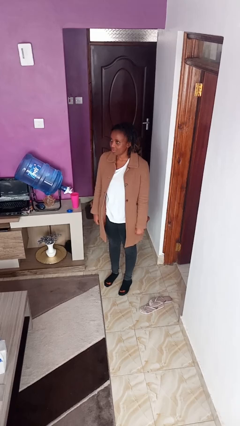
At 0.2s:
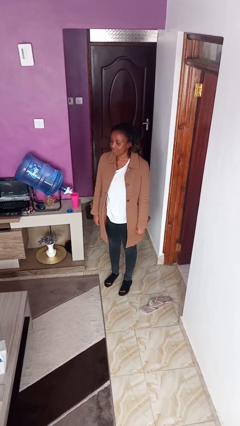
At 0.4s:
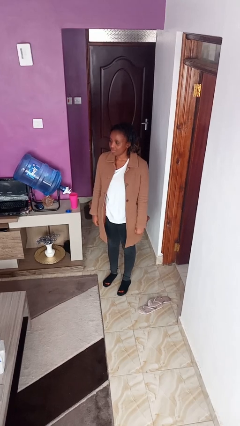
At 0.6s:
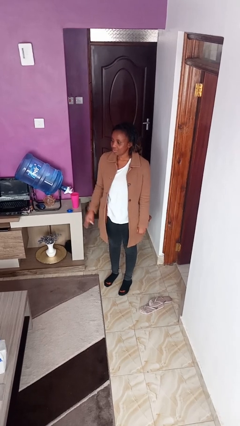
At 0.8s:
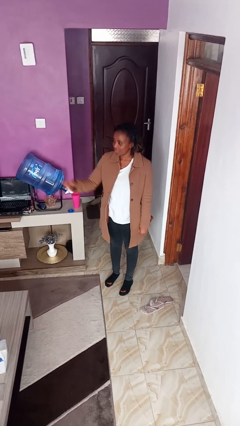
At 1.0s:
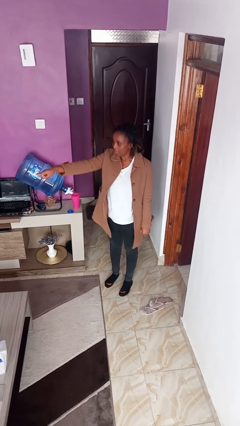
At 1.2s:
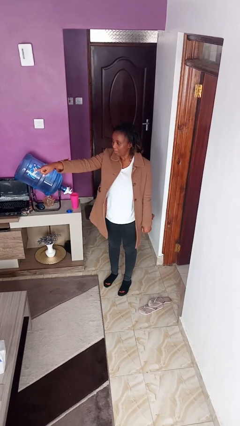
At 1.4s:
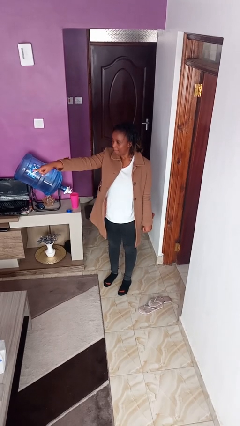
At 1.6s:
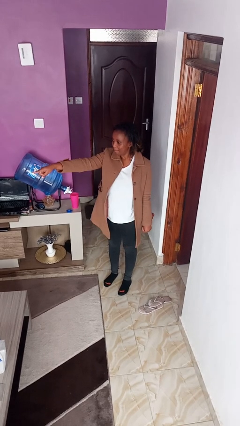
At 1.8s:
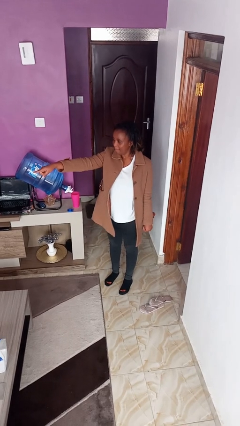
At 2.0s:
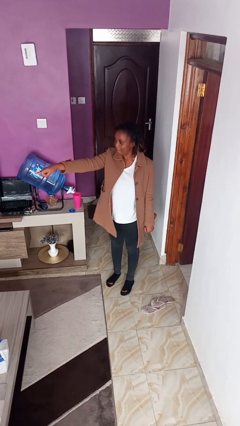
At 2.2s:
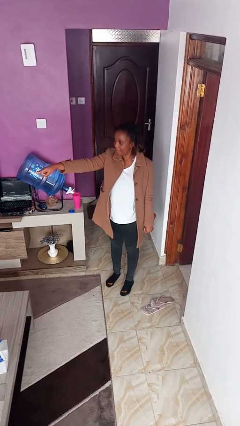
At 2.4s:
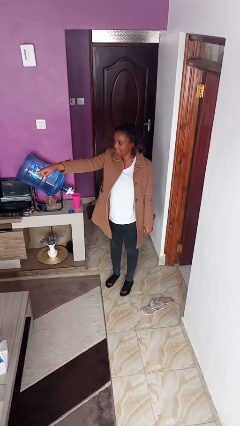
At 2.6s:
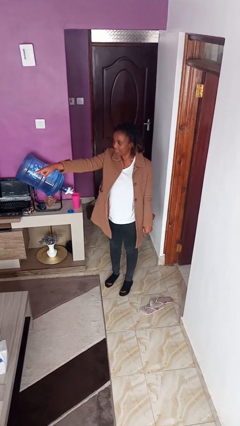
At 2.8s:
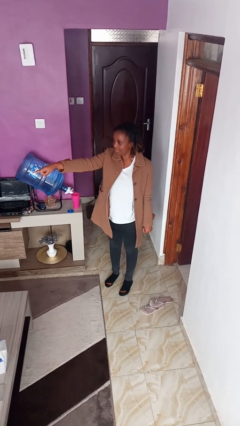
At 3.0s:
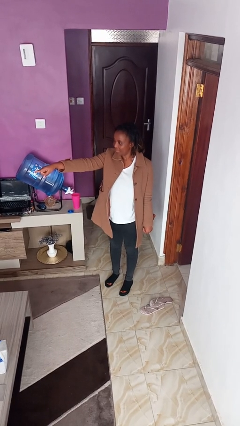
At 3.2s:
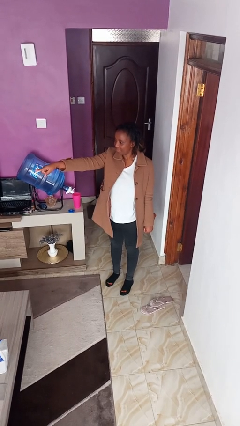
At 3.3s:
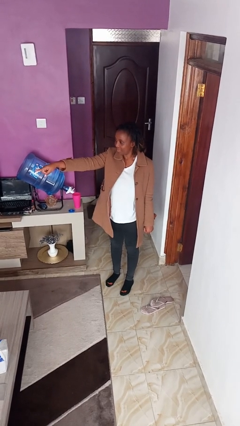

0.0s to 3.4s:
person points at person

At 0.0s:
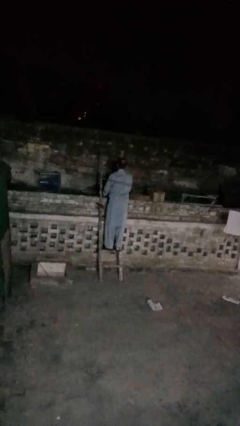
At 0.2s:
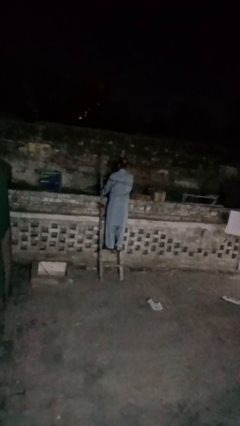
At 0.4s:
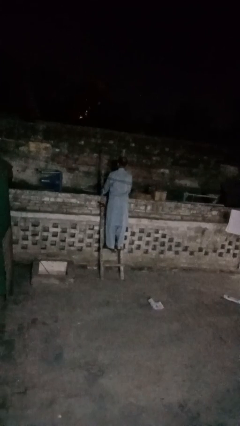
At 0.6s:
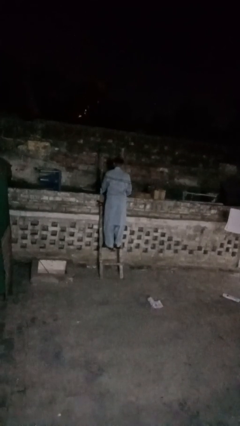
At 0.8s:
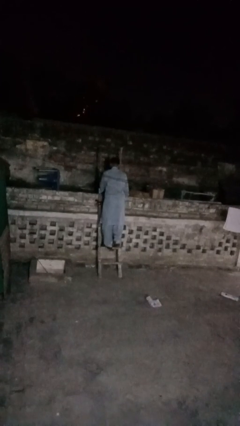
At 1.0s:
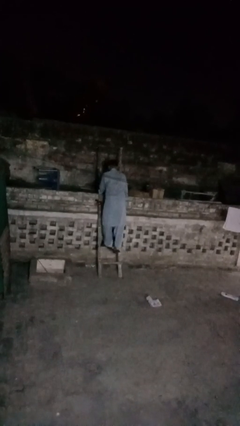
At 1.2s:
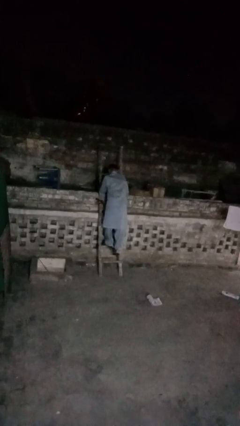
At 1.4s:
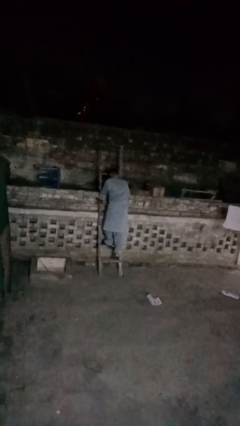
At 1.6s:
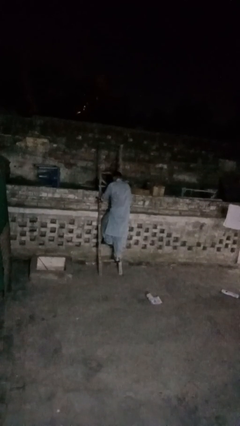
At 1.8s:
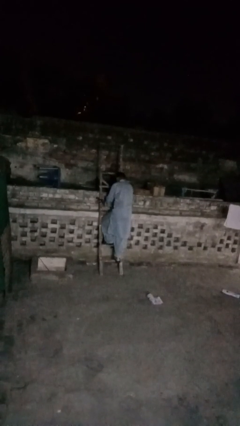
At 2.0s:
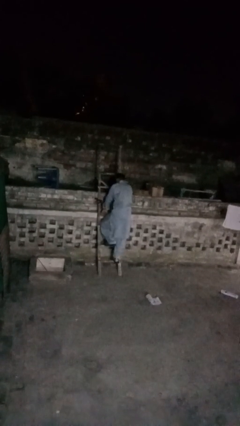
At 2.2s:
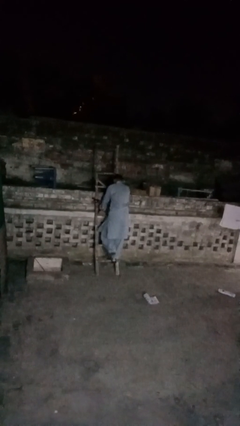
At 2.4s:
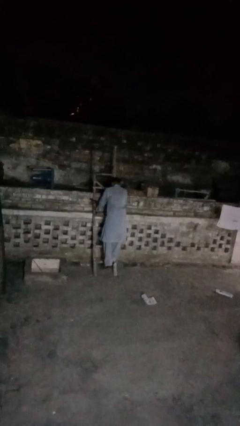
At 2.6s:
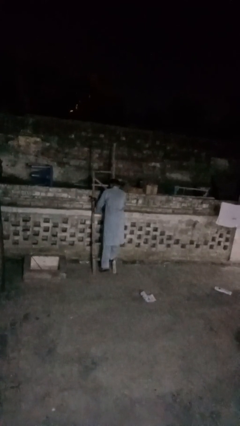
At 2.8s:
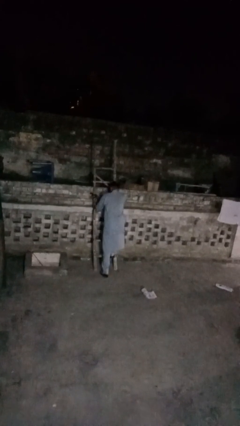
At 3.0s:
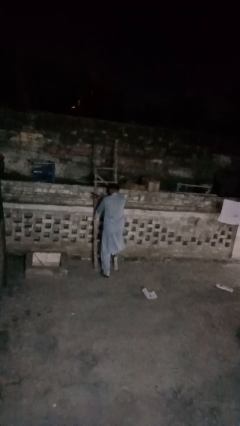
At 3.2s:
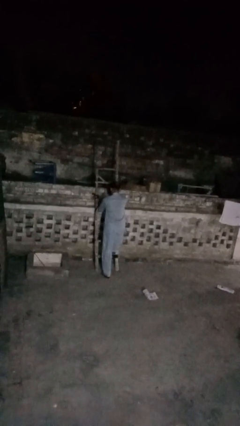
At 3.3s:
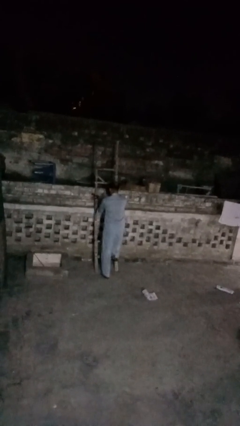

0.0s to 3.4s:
person climbs down ladder

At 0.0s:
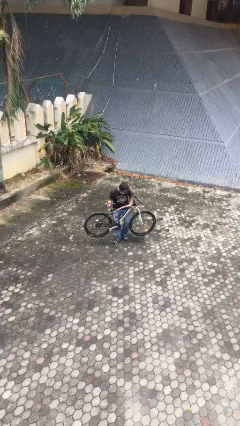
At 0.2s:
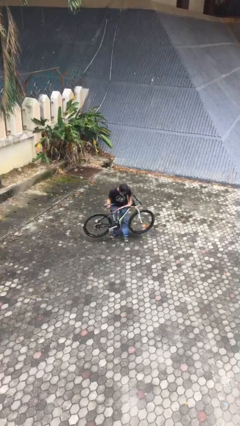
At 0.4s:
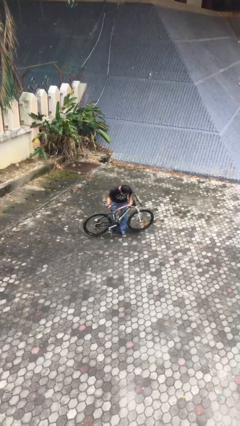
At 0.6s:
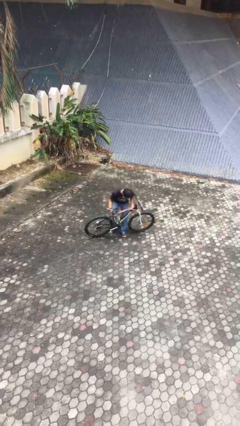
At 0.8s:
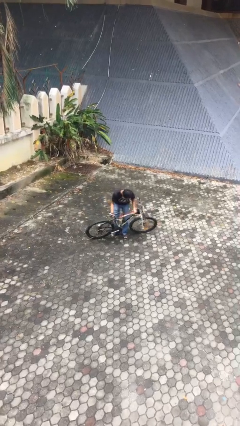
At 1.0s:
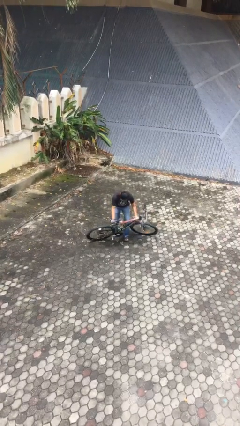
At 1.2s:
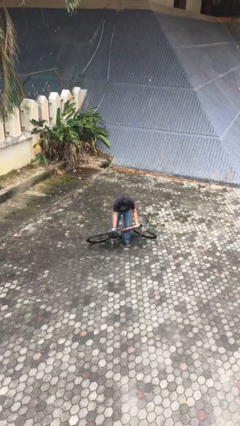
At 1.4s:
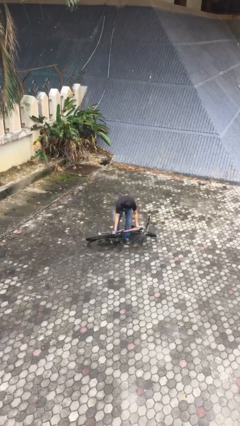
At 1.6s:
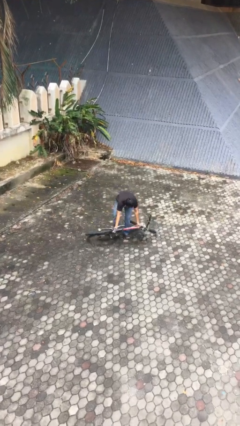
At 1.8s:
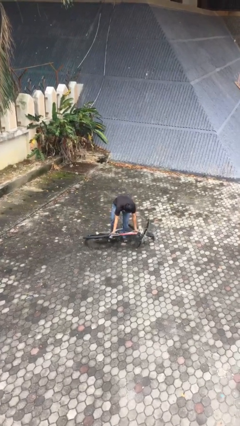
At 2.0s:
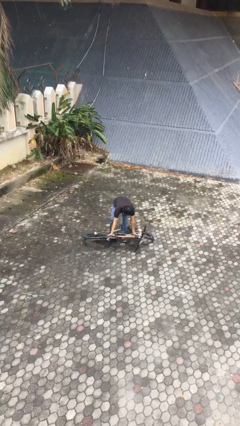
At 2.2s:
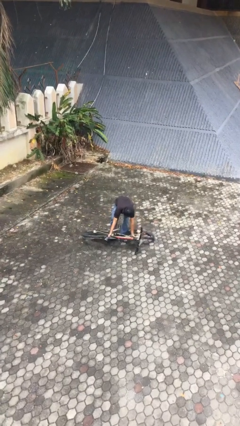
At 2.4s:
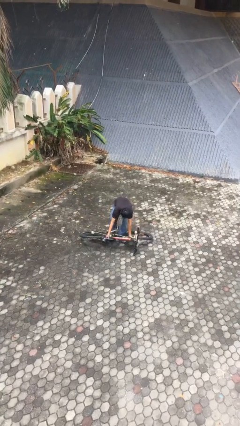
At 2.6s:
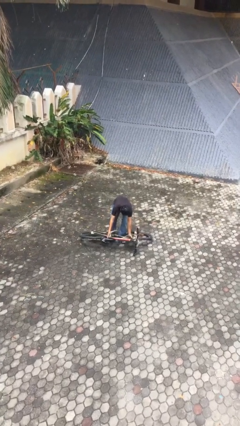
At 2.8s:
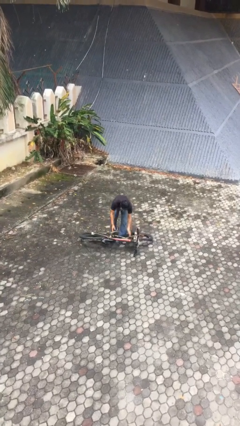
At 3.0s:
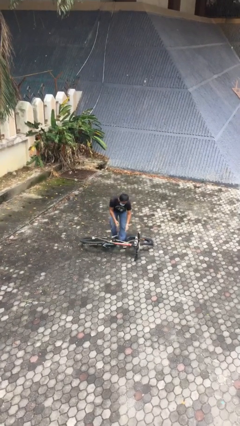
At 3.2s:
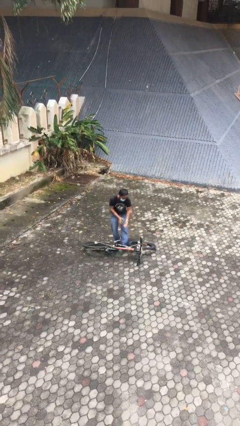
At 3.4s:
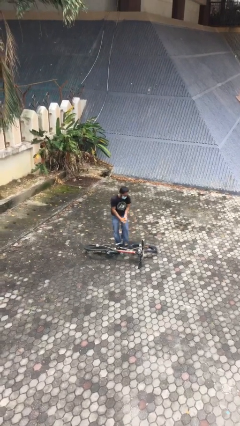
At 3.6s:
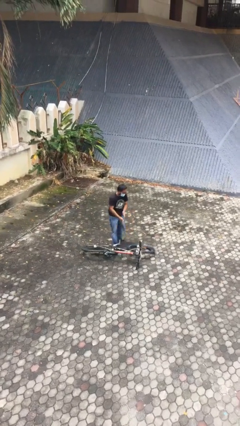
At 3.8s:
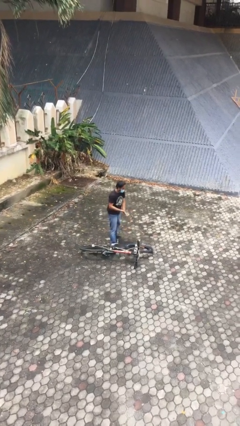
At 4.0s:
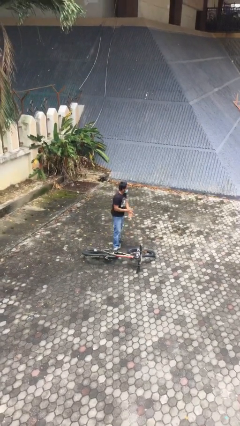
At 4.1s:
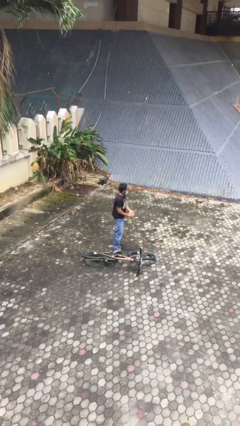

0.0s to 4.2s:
person puts down object on floor

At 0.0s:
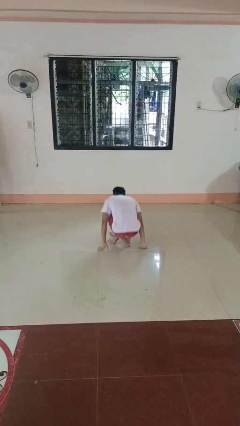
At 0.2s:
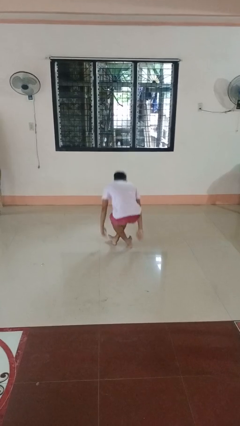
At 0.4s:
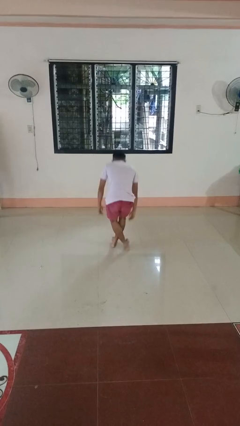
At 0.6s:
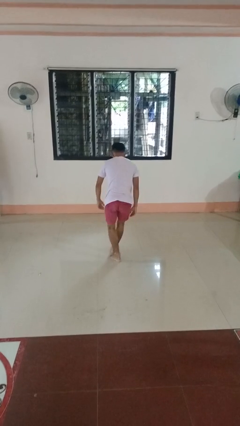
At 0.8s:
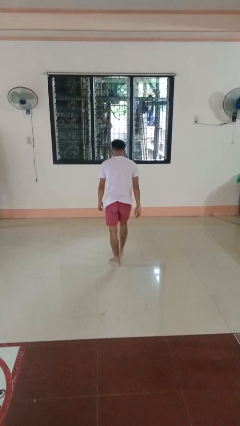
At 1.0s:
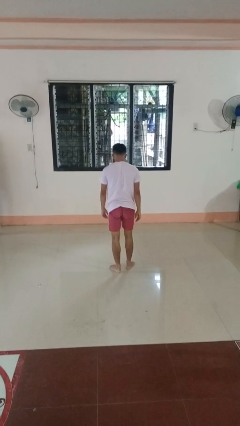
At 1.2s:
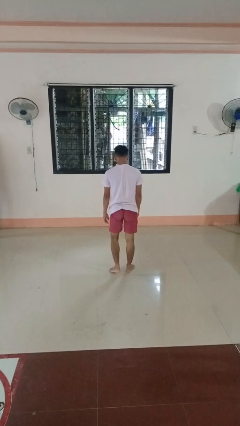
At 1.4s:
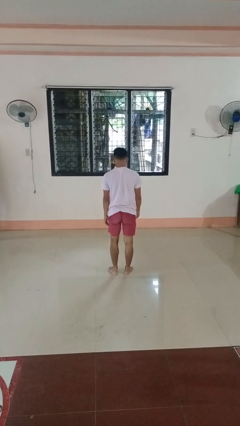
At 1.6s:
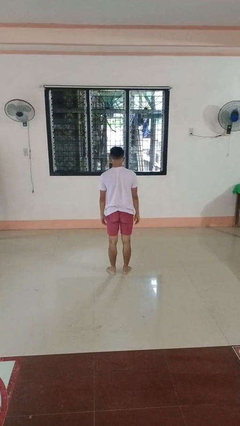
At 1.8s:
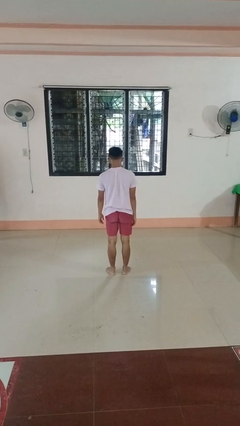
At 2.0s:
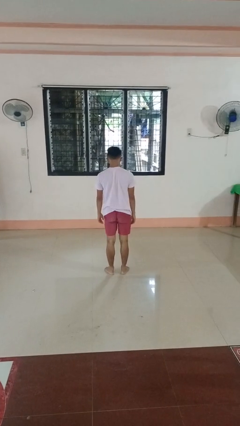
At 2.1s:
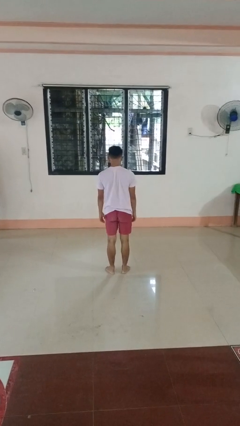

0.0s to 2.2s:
person stands up from floor

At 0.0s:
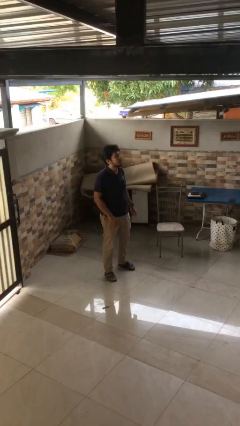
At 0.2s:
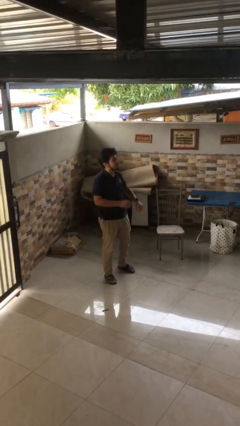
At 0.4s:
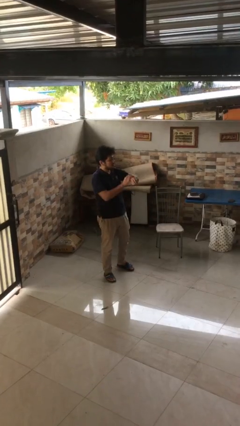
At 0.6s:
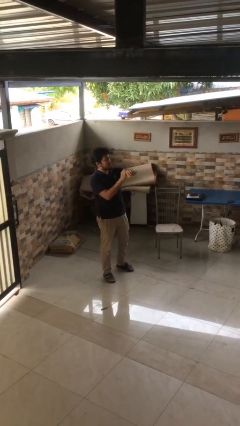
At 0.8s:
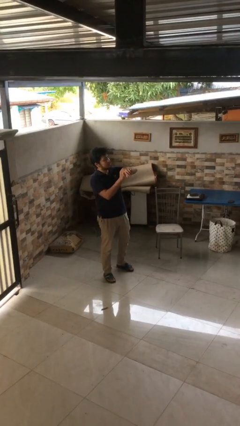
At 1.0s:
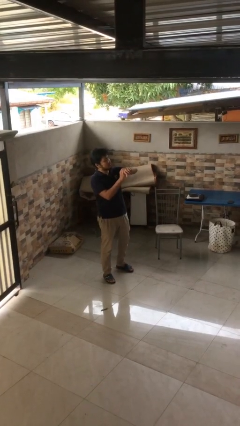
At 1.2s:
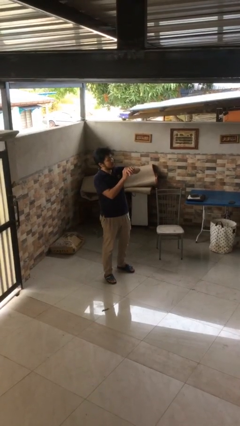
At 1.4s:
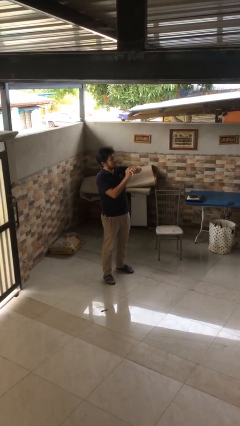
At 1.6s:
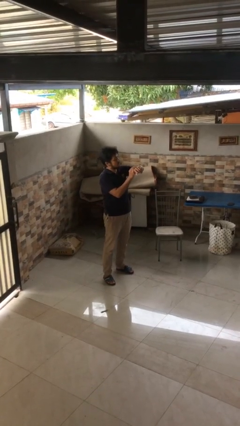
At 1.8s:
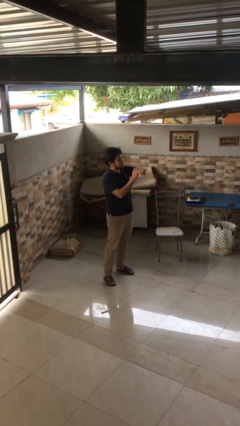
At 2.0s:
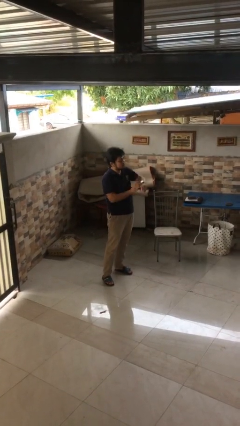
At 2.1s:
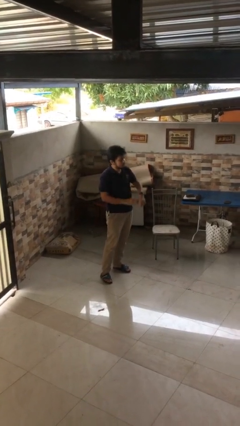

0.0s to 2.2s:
person looks at wristwatch

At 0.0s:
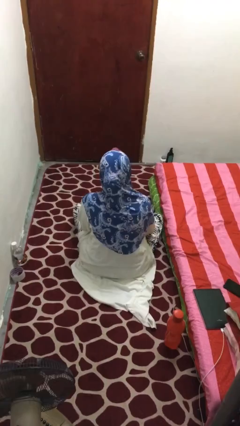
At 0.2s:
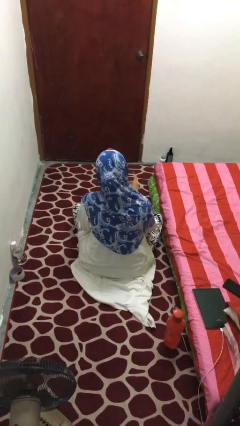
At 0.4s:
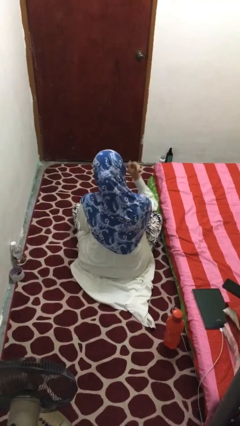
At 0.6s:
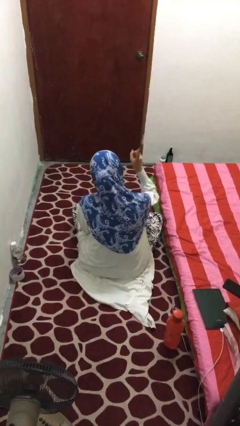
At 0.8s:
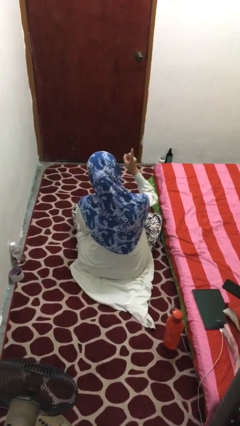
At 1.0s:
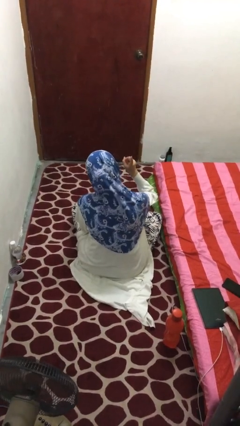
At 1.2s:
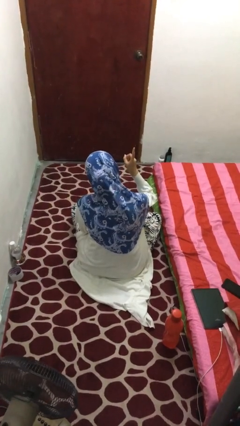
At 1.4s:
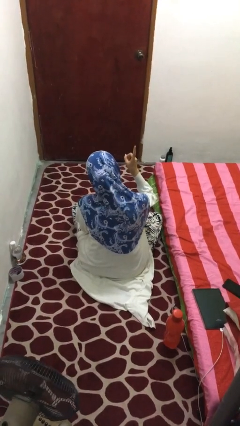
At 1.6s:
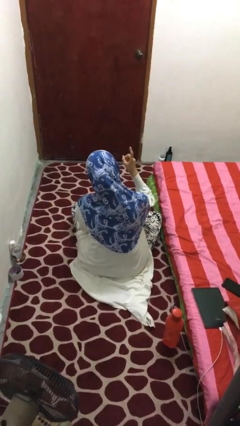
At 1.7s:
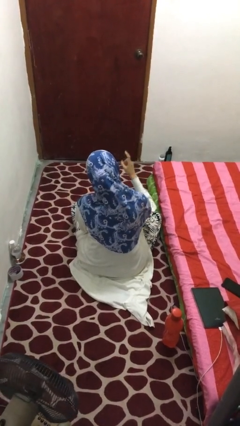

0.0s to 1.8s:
person gestures number one

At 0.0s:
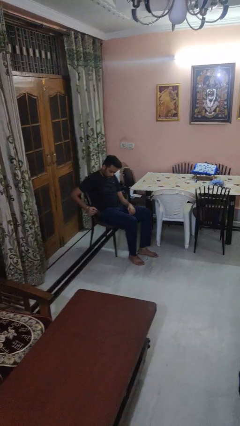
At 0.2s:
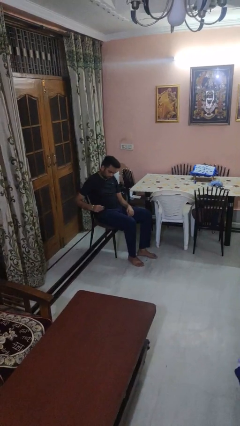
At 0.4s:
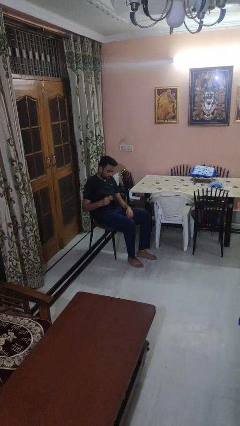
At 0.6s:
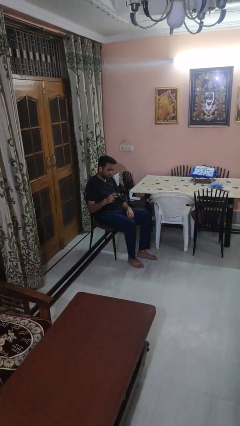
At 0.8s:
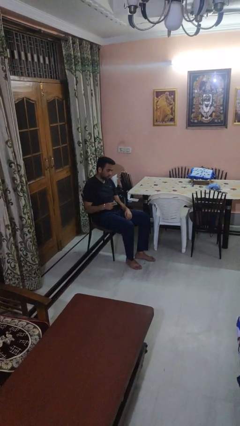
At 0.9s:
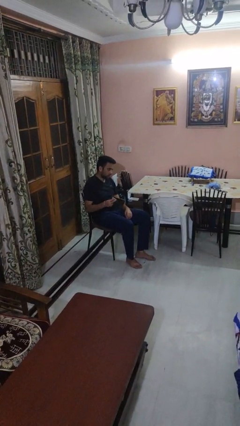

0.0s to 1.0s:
person takes phone from pocket
